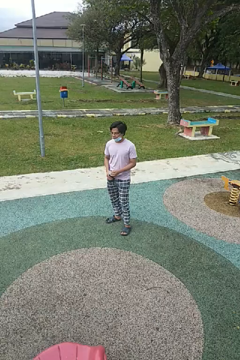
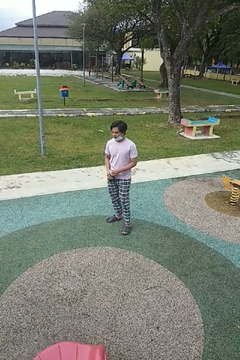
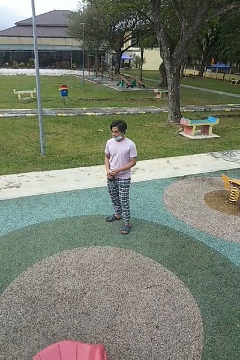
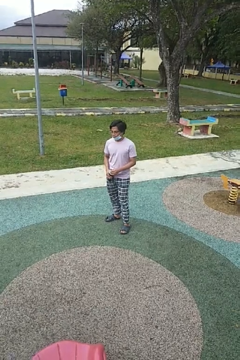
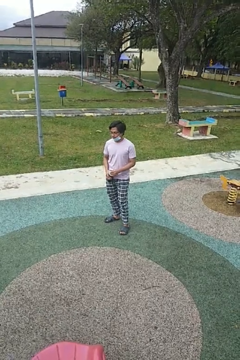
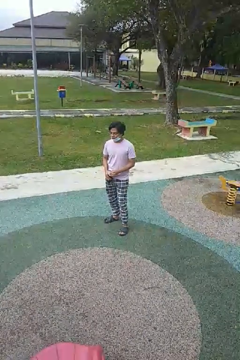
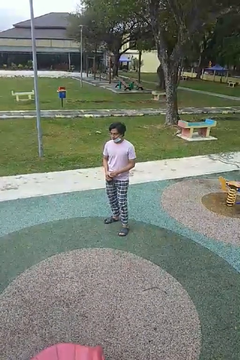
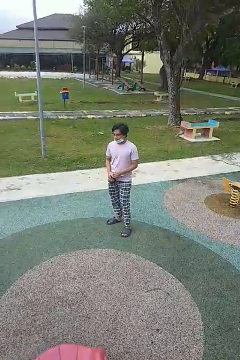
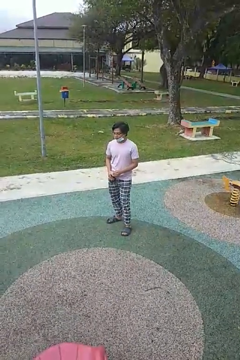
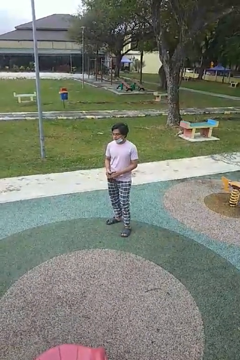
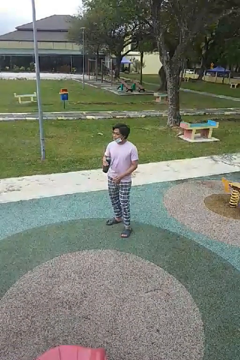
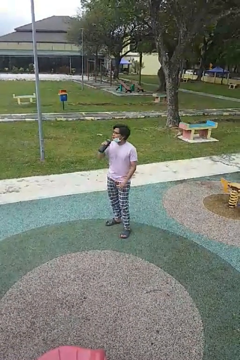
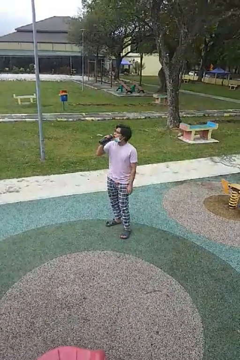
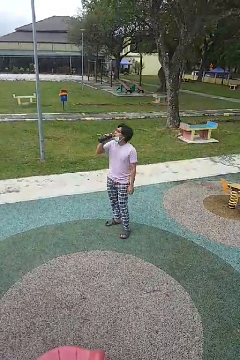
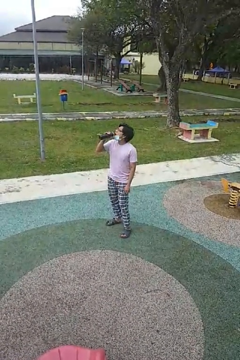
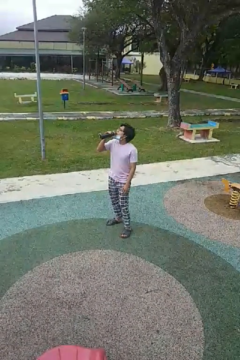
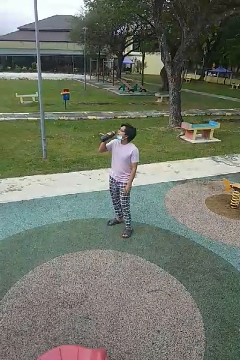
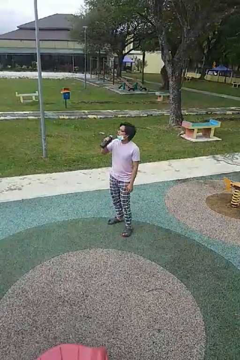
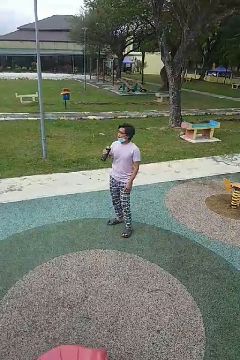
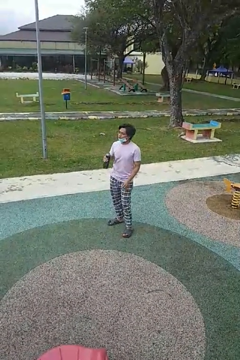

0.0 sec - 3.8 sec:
person drinks from bottle

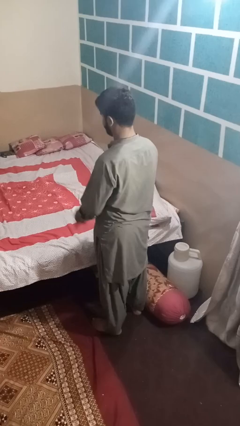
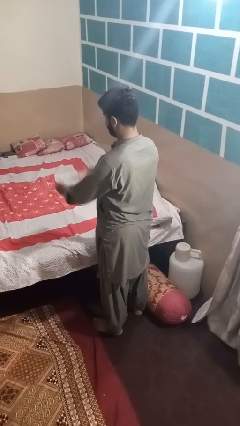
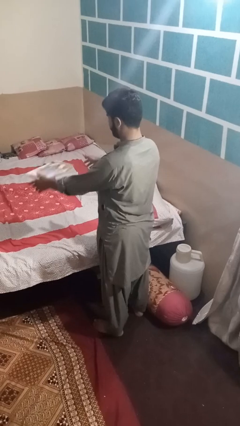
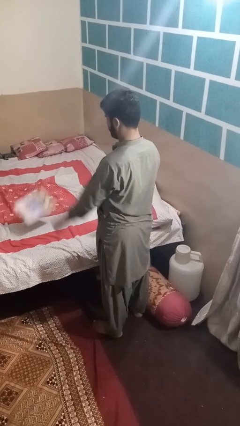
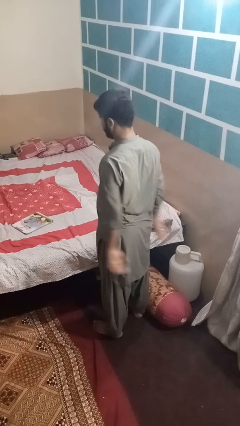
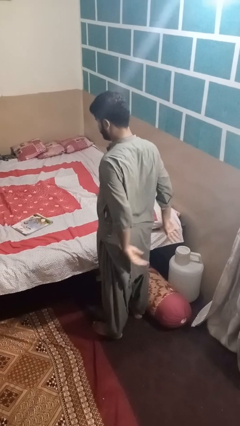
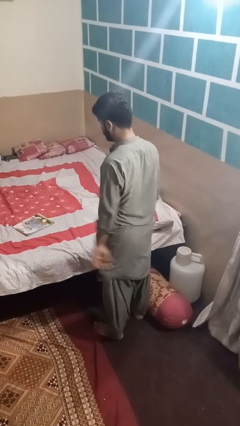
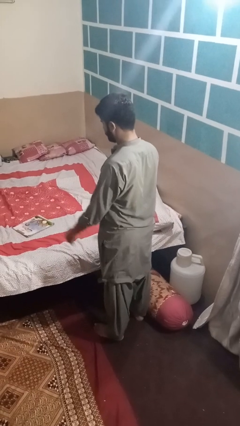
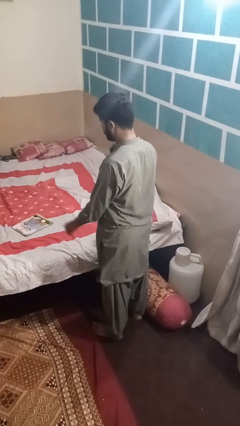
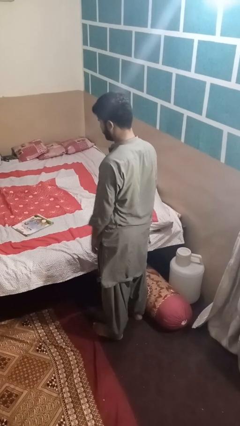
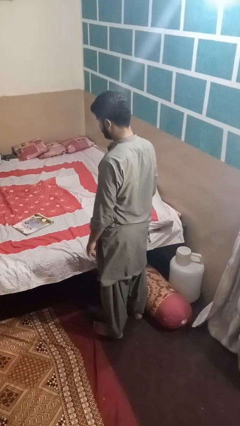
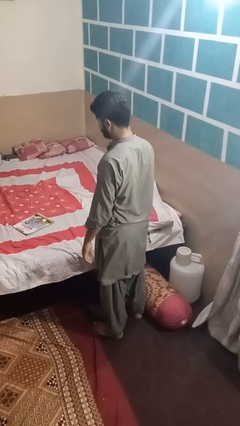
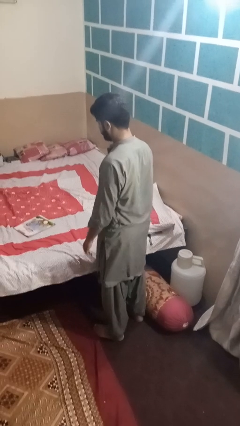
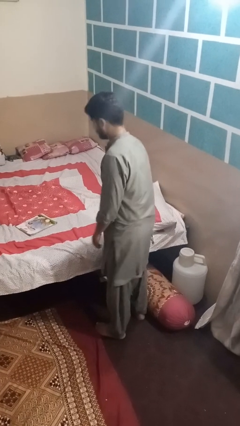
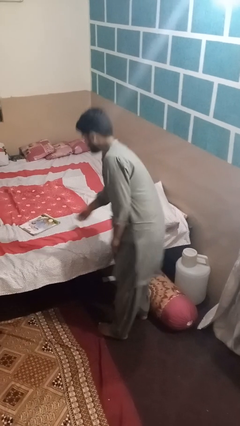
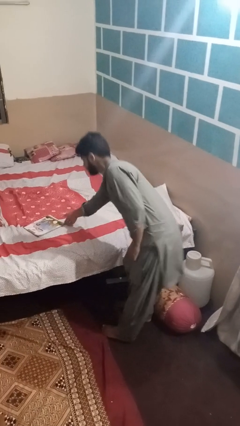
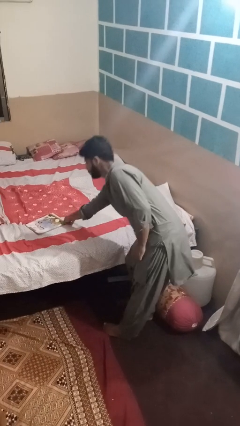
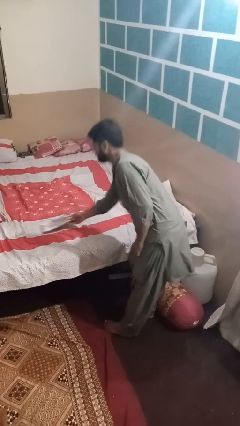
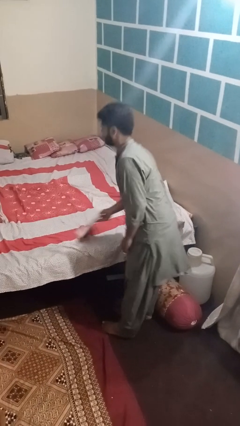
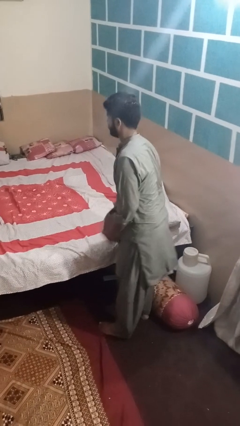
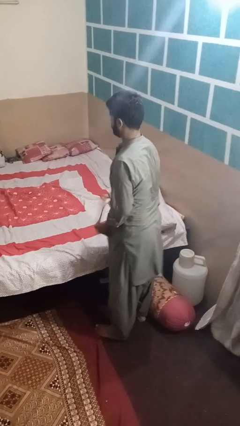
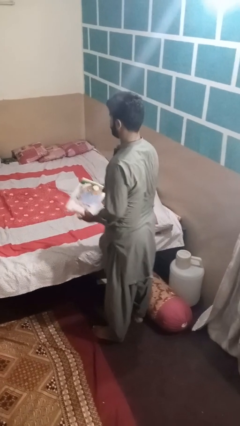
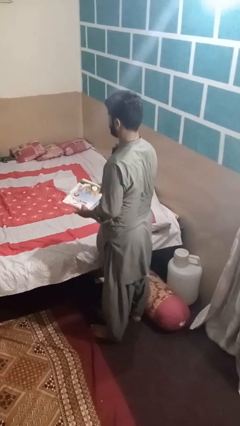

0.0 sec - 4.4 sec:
person throws object on bed

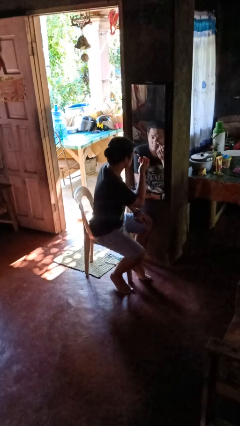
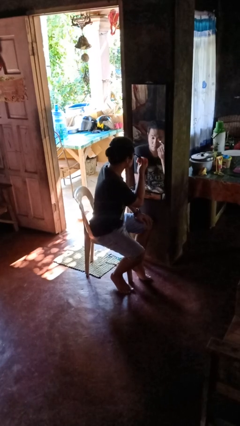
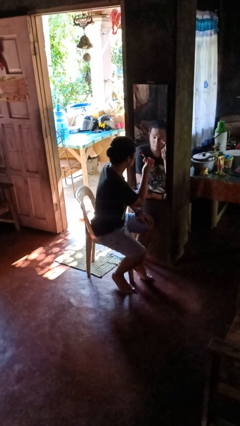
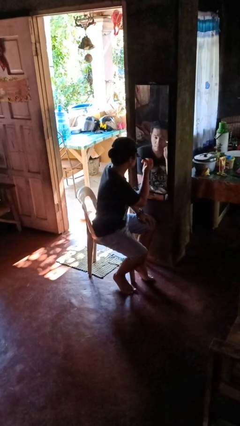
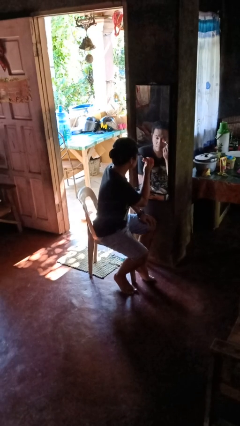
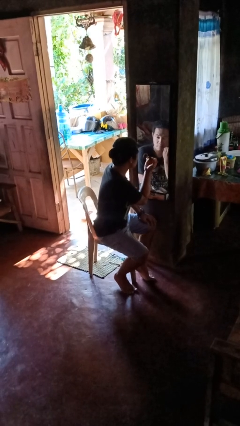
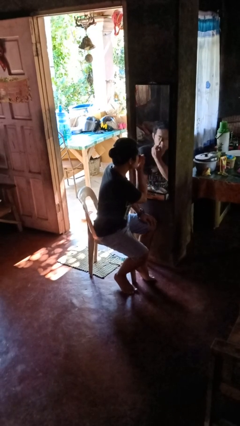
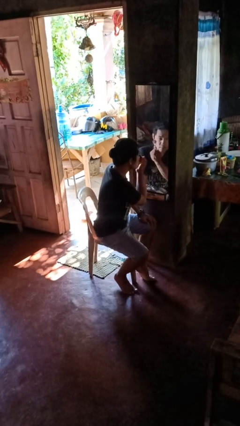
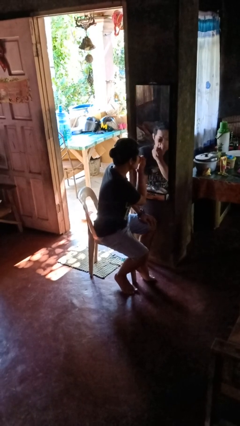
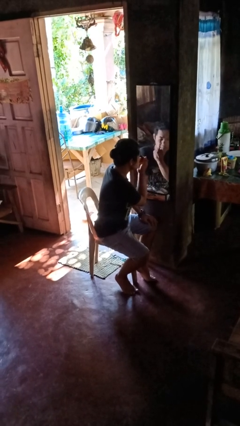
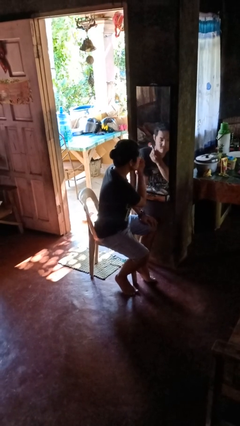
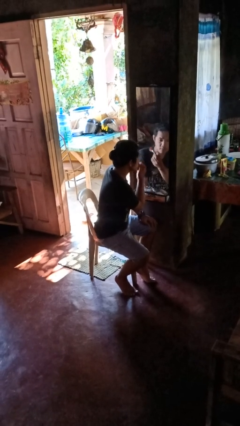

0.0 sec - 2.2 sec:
person applies eye makeup

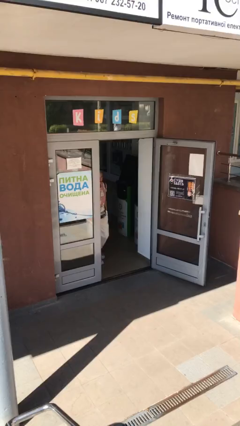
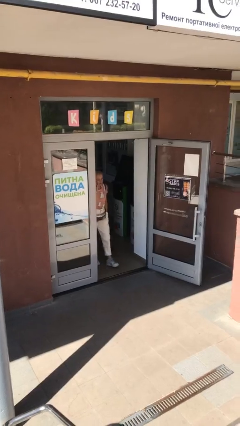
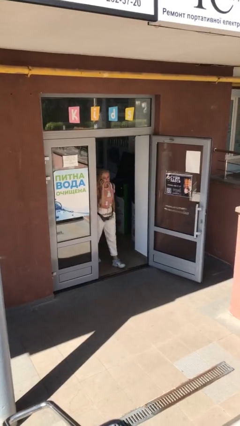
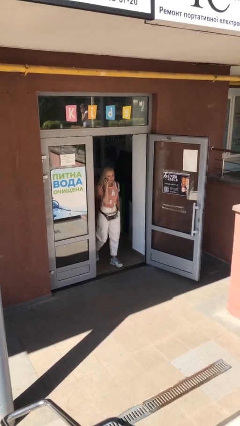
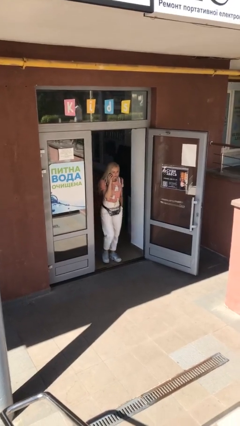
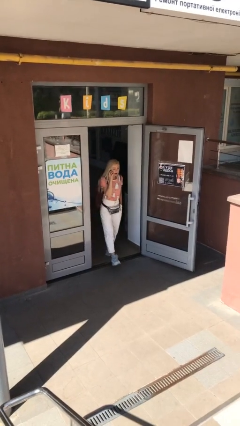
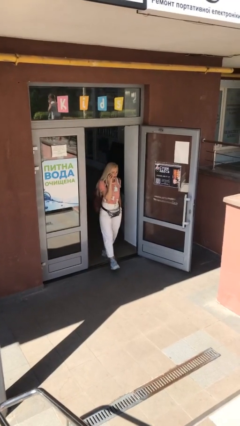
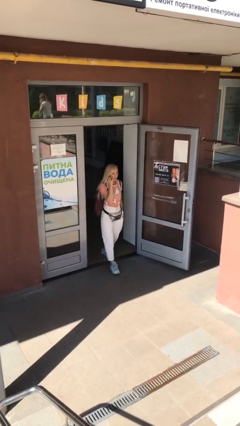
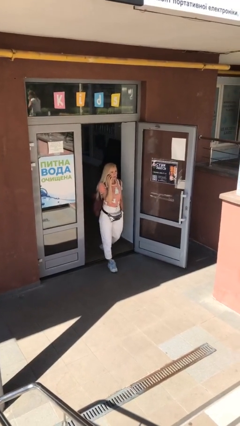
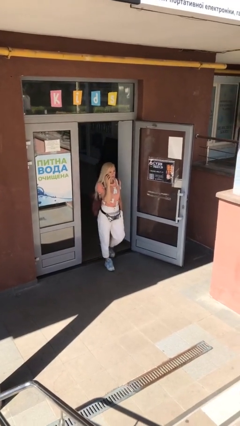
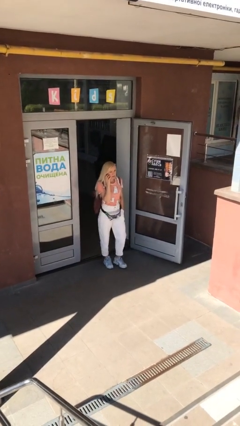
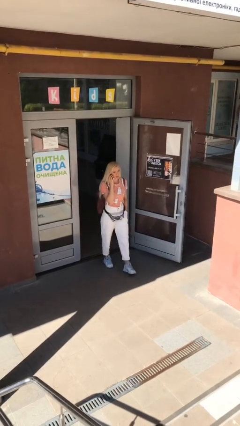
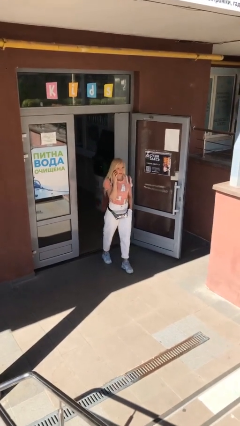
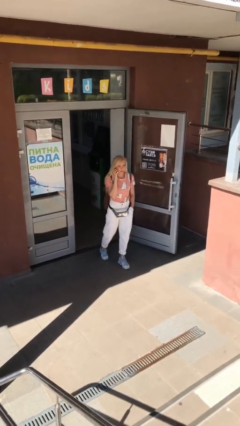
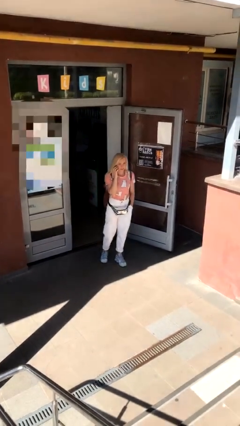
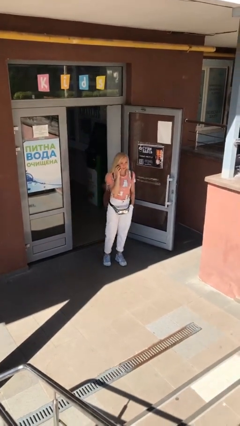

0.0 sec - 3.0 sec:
person enters scene through structure

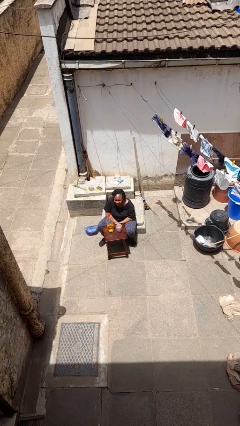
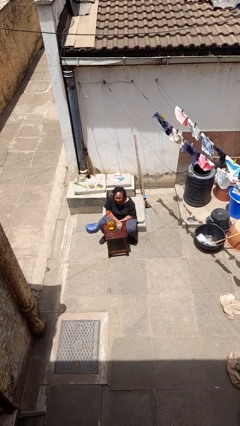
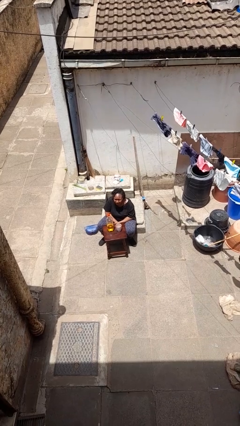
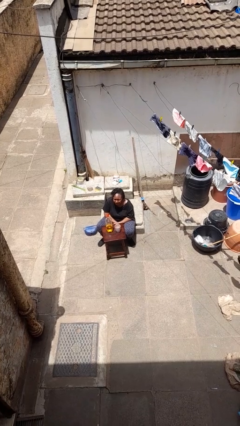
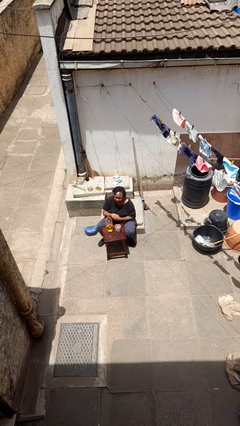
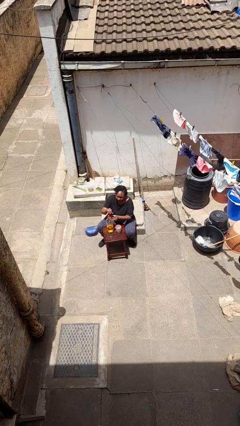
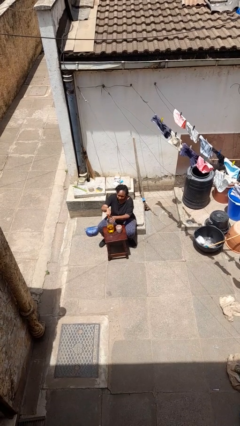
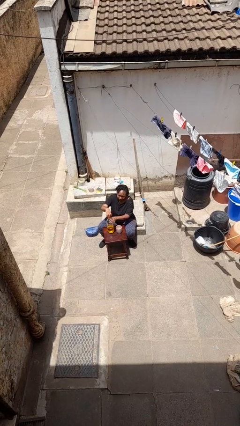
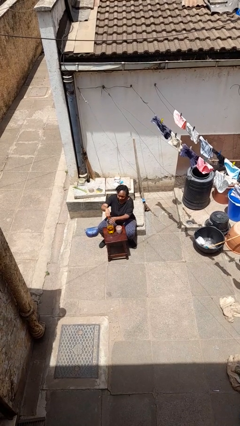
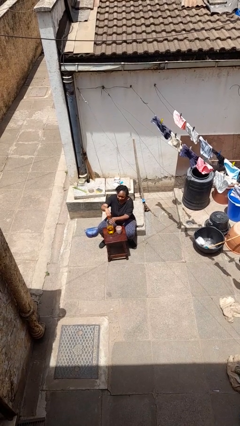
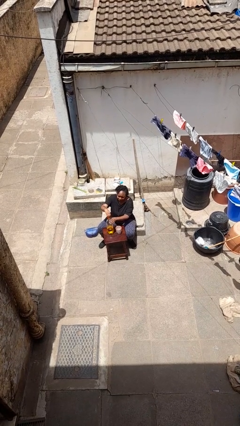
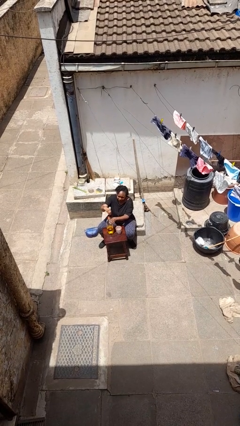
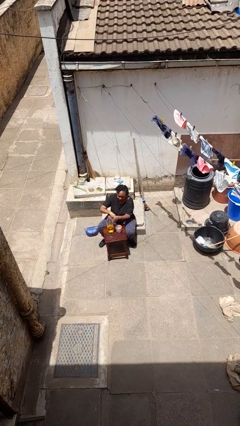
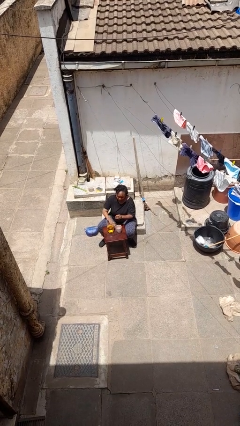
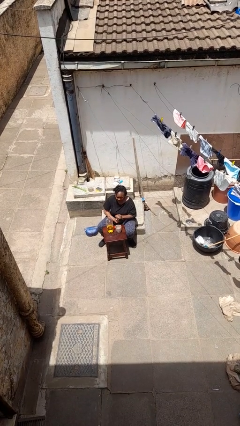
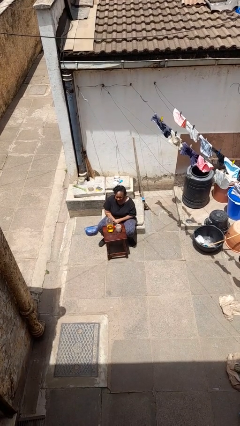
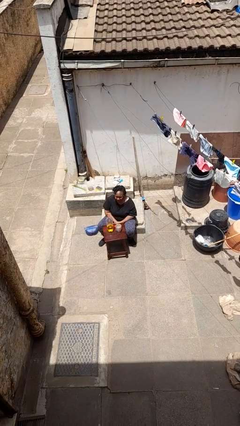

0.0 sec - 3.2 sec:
person unscrews lid from bottle

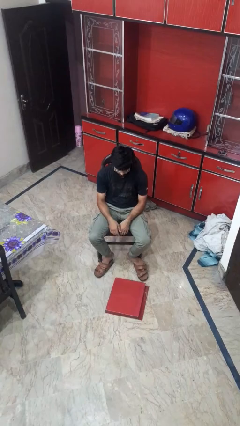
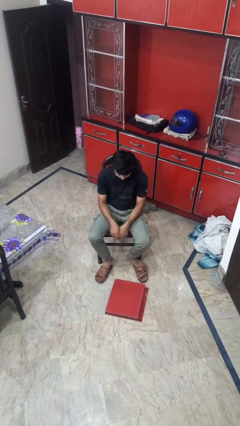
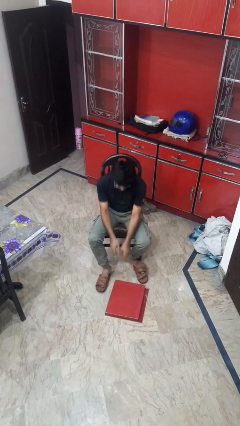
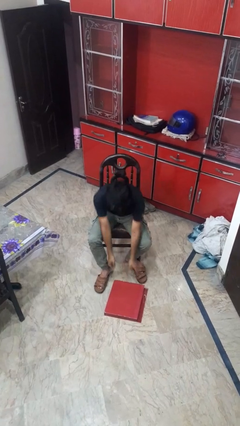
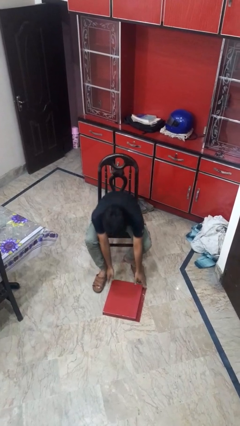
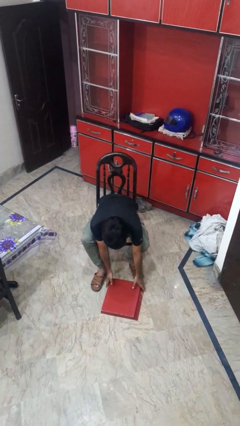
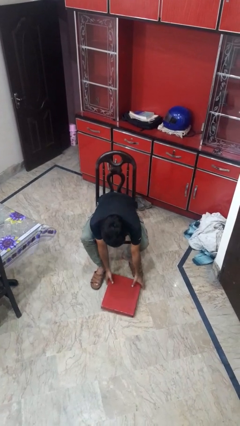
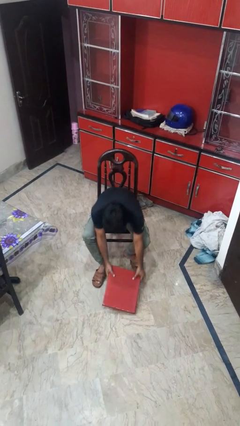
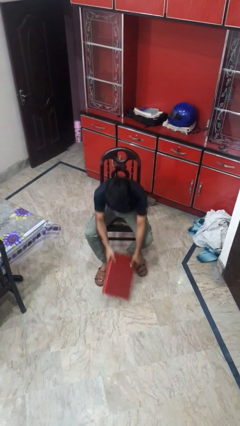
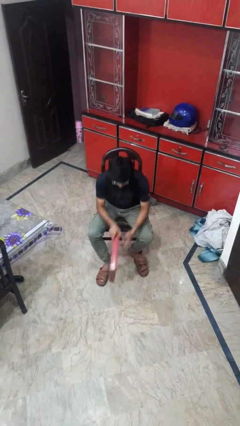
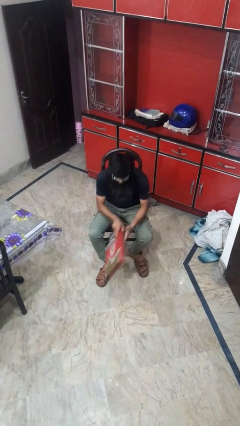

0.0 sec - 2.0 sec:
person picks up object from floor
